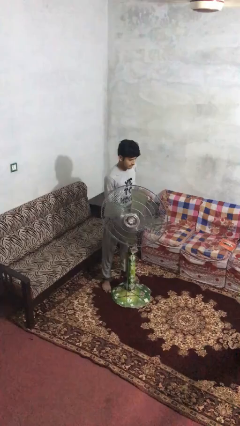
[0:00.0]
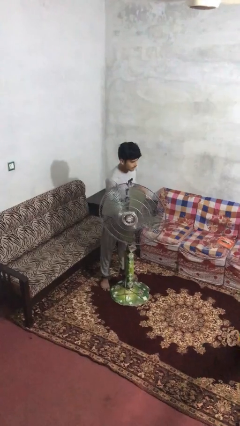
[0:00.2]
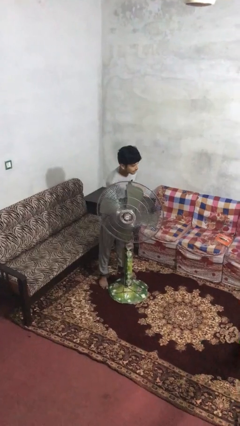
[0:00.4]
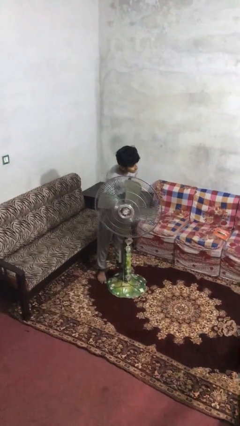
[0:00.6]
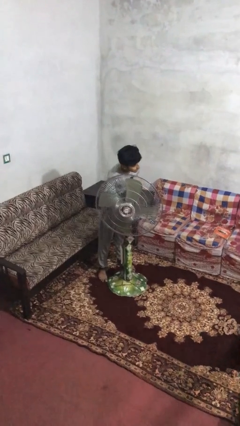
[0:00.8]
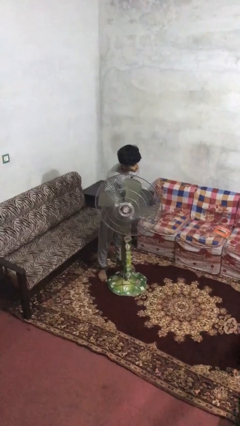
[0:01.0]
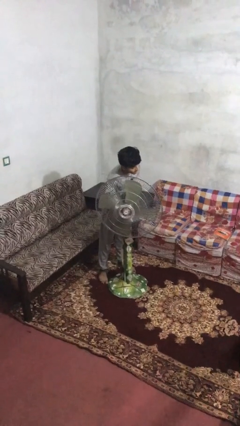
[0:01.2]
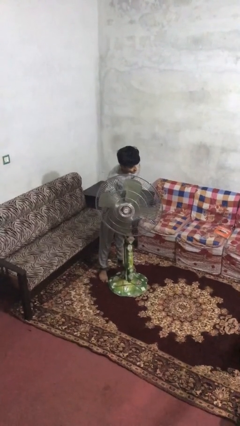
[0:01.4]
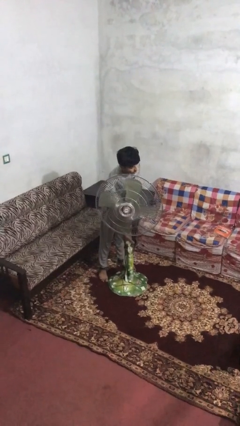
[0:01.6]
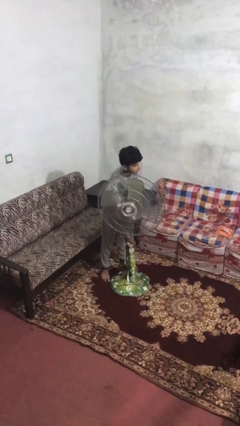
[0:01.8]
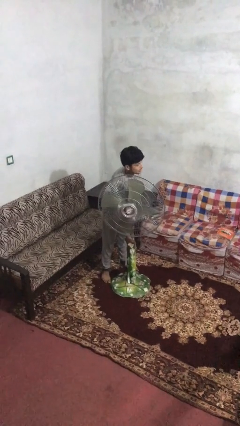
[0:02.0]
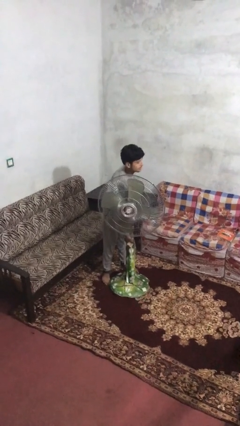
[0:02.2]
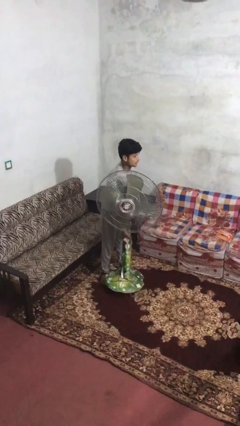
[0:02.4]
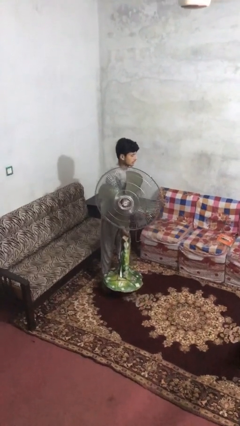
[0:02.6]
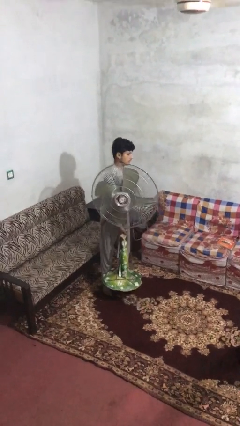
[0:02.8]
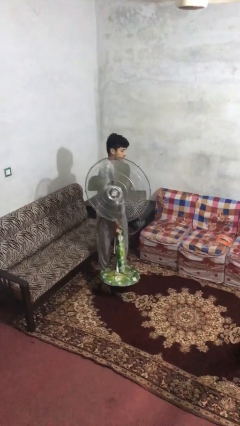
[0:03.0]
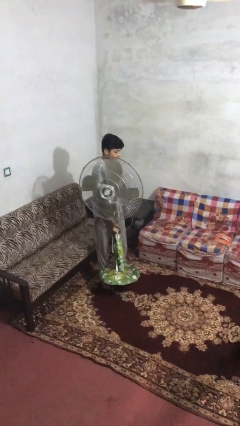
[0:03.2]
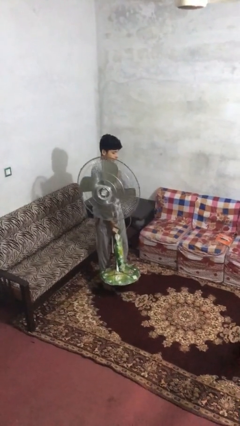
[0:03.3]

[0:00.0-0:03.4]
person picks up object from floor

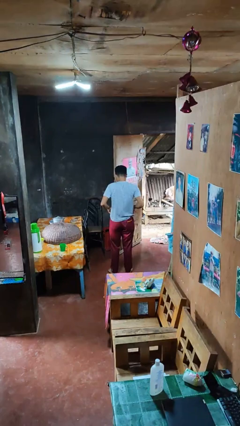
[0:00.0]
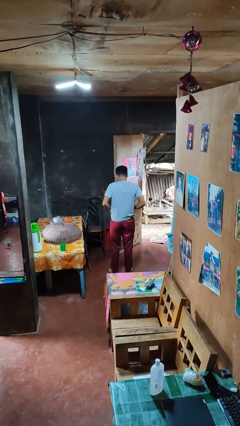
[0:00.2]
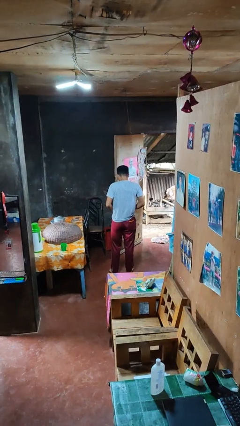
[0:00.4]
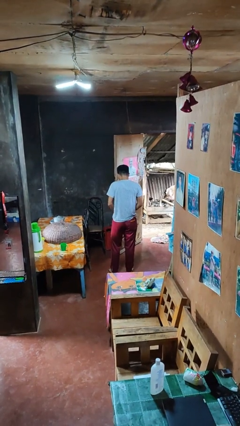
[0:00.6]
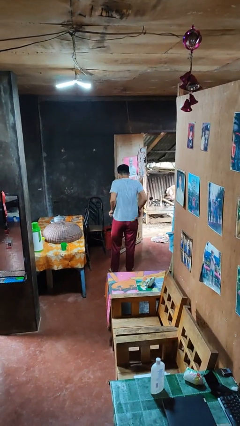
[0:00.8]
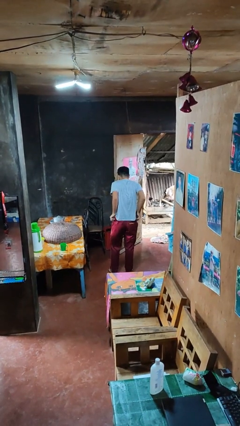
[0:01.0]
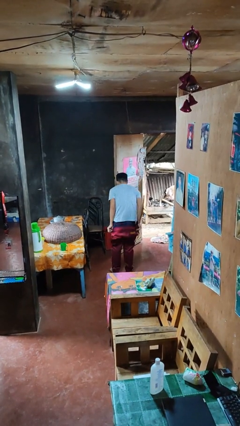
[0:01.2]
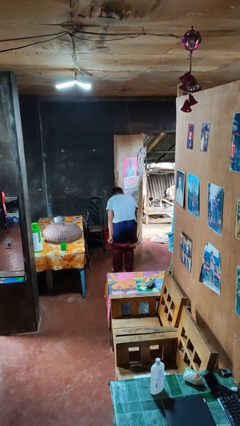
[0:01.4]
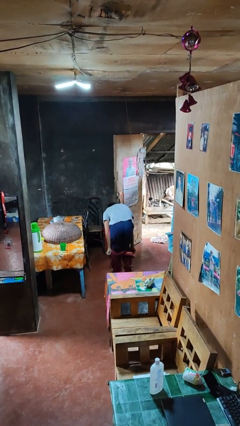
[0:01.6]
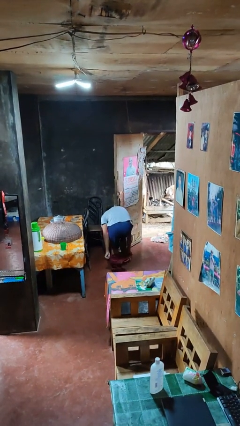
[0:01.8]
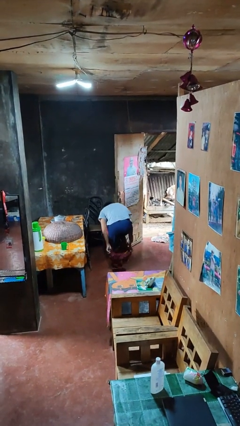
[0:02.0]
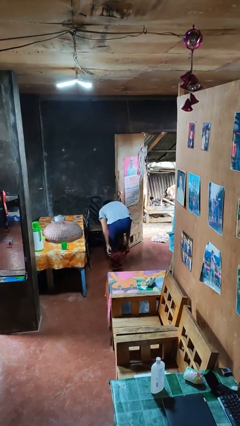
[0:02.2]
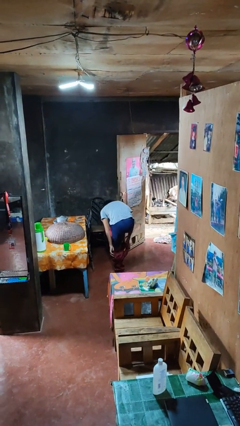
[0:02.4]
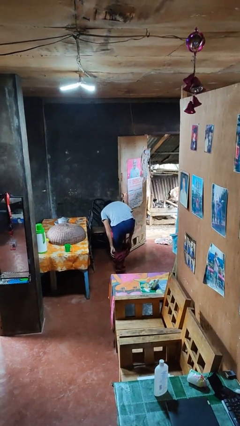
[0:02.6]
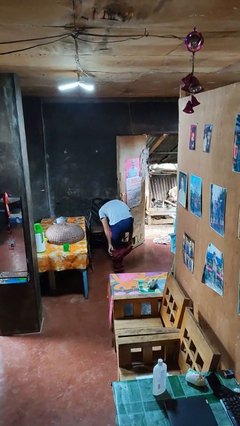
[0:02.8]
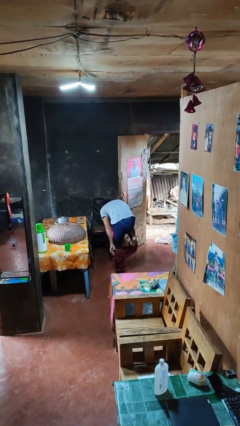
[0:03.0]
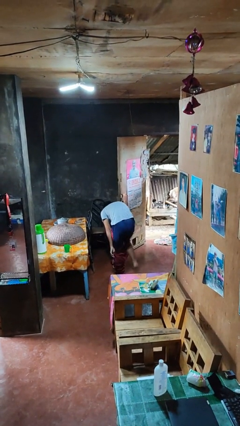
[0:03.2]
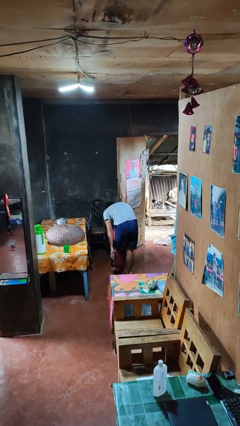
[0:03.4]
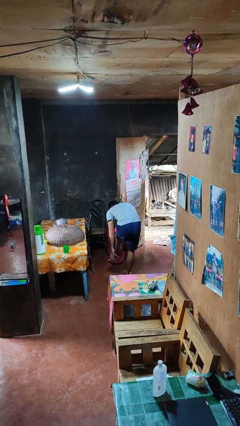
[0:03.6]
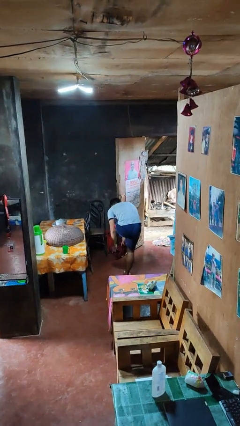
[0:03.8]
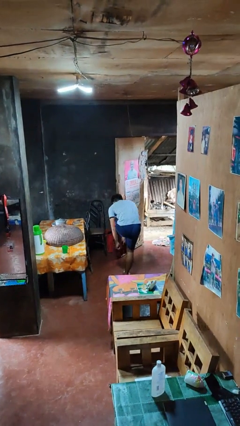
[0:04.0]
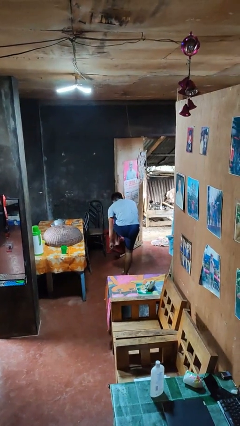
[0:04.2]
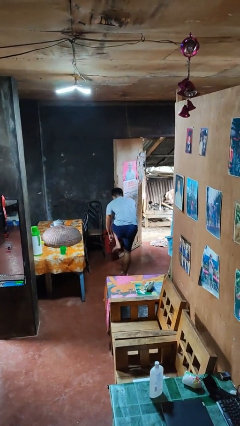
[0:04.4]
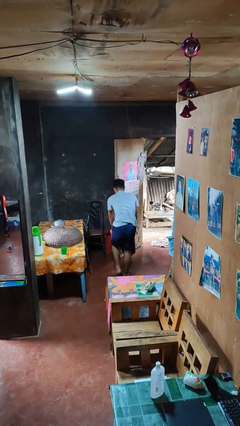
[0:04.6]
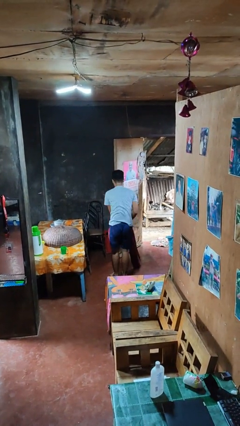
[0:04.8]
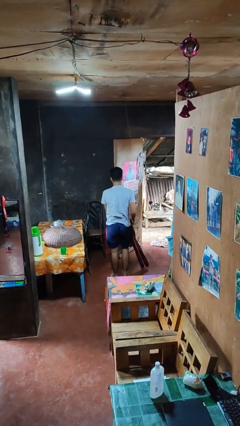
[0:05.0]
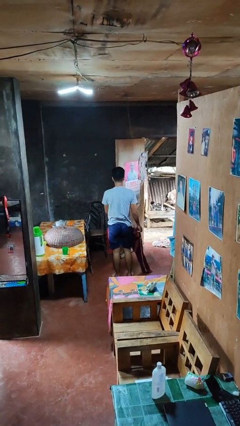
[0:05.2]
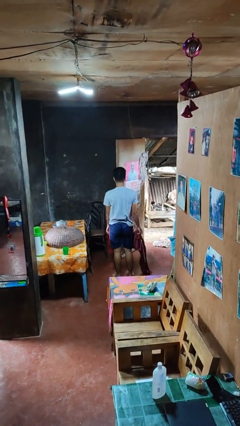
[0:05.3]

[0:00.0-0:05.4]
person takes off pants

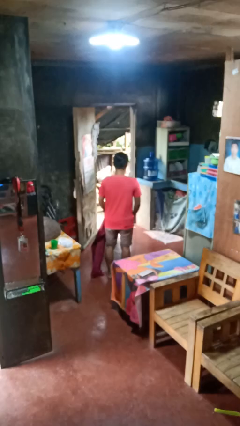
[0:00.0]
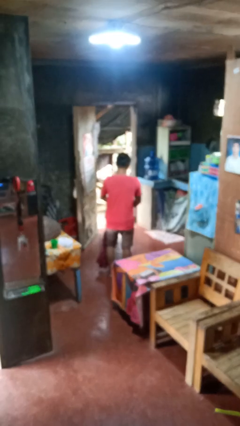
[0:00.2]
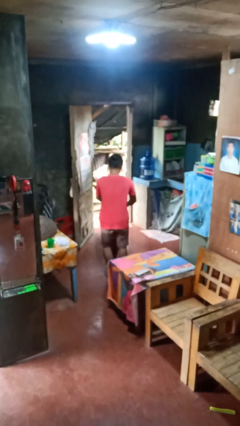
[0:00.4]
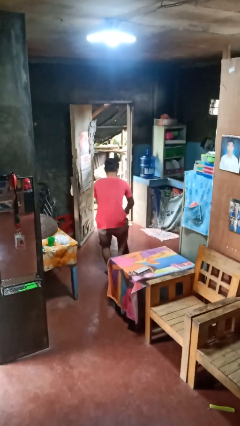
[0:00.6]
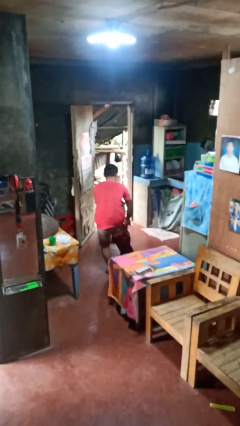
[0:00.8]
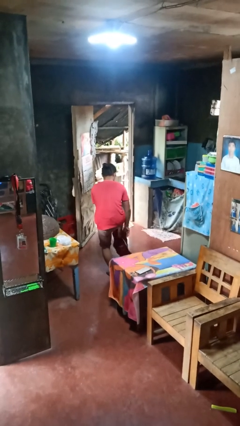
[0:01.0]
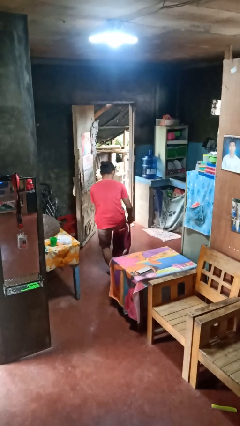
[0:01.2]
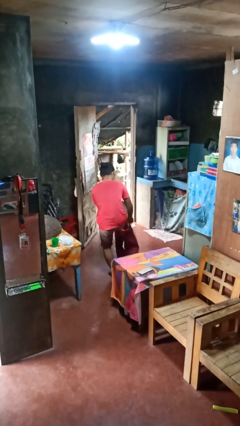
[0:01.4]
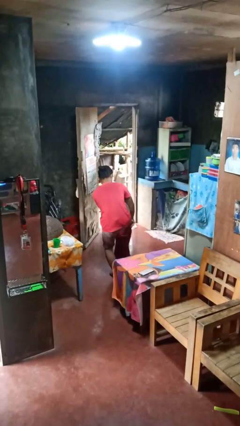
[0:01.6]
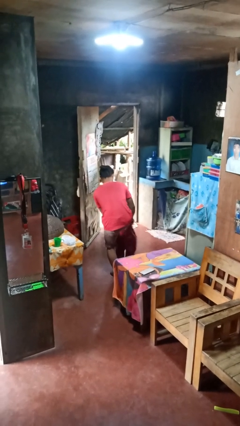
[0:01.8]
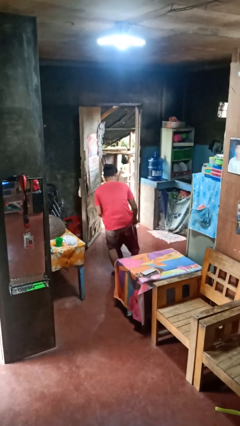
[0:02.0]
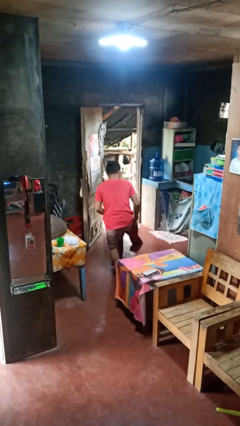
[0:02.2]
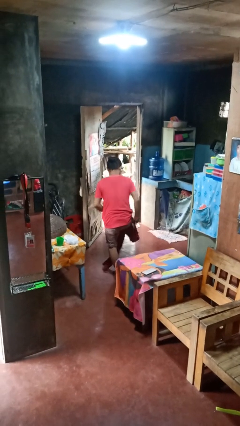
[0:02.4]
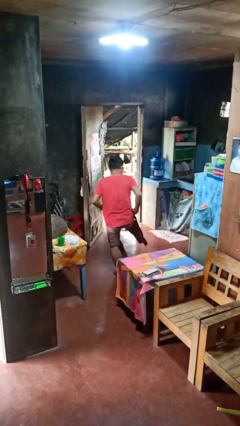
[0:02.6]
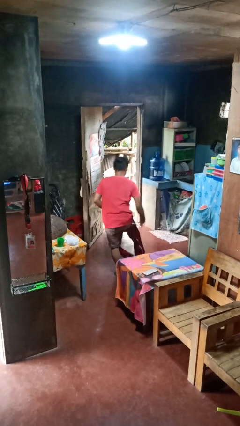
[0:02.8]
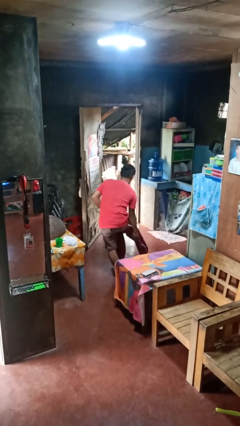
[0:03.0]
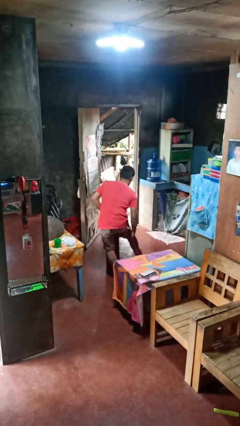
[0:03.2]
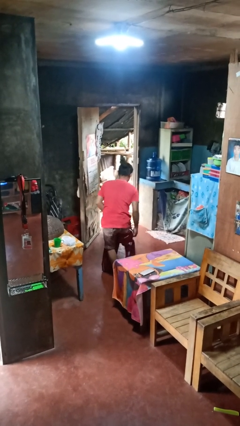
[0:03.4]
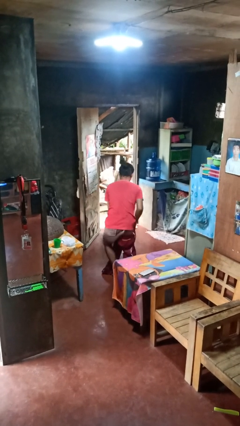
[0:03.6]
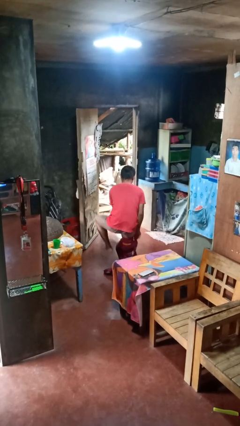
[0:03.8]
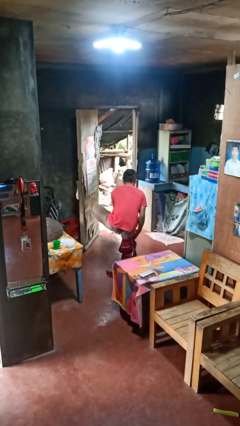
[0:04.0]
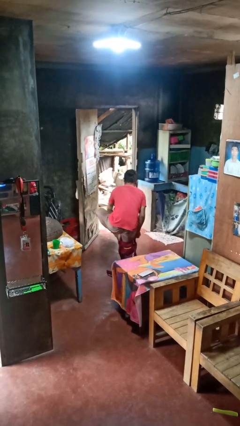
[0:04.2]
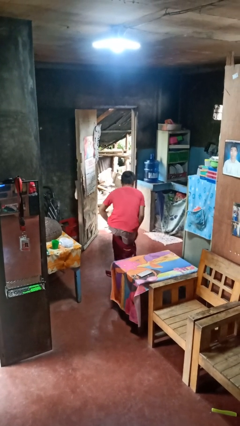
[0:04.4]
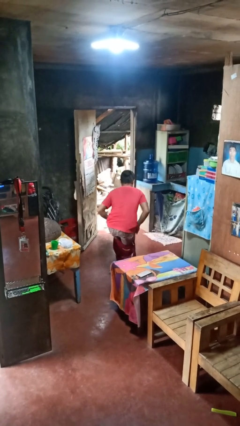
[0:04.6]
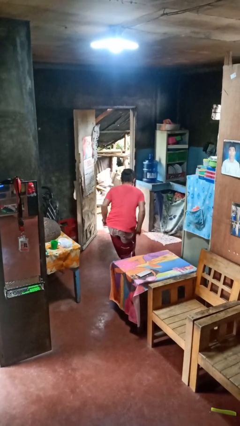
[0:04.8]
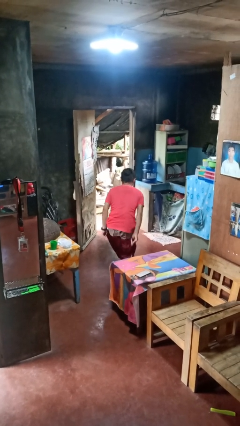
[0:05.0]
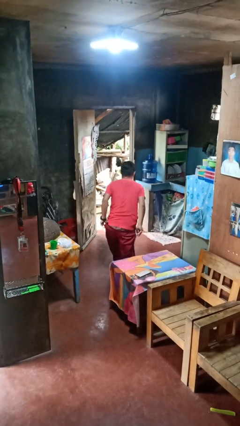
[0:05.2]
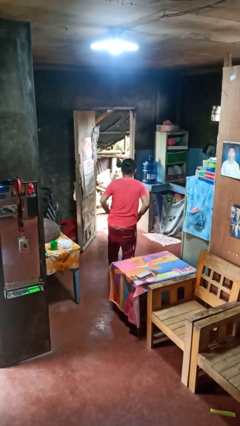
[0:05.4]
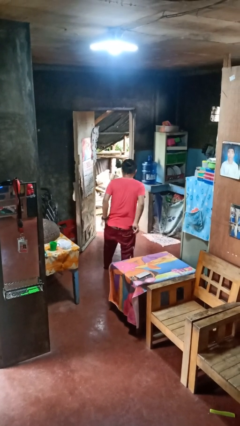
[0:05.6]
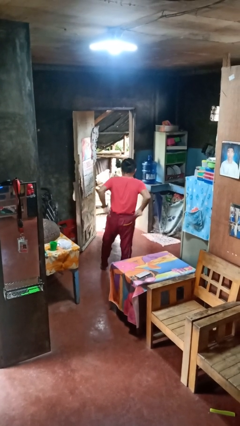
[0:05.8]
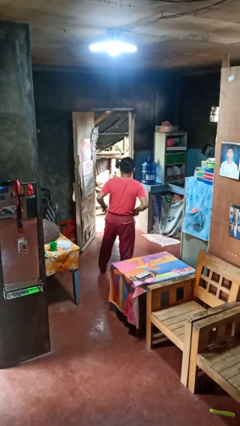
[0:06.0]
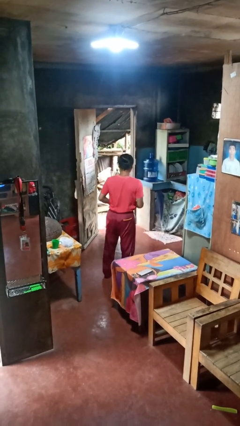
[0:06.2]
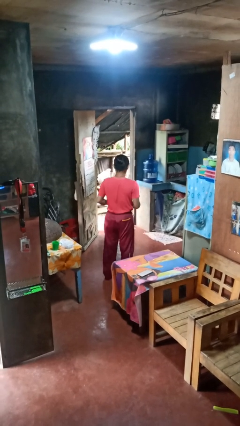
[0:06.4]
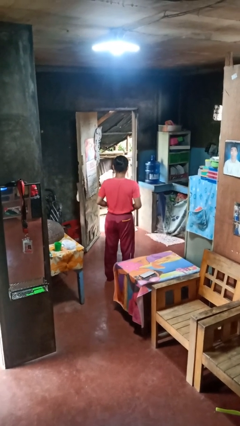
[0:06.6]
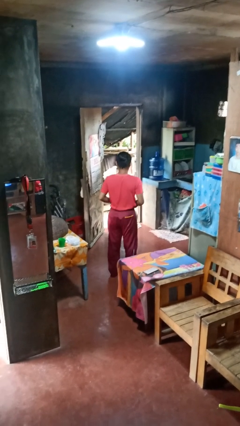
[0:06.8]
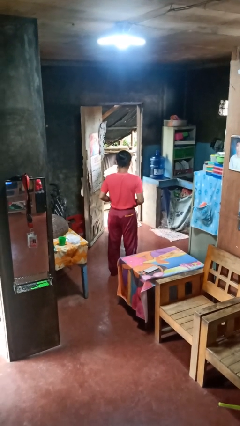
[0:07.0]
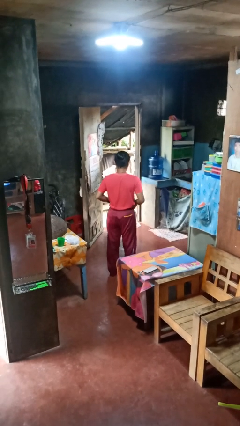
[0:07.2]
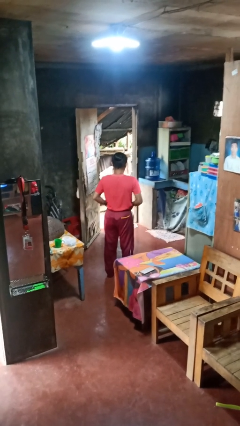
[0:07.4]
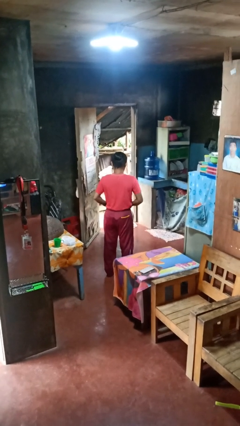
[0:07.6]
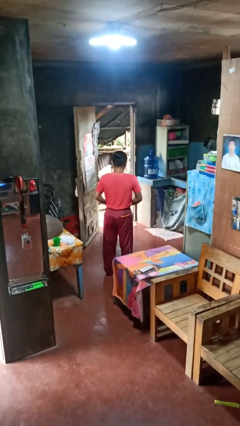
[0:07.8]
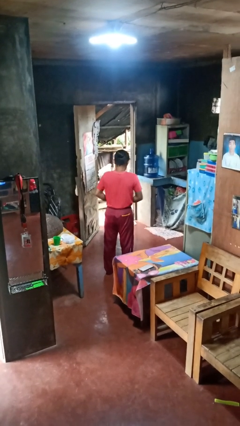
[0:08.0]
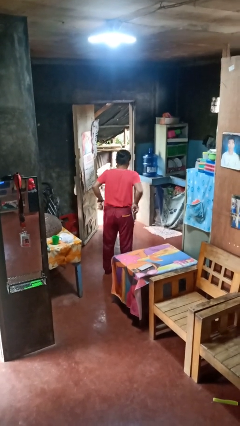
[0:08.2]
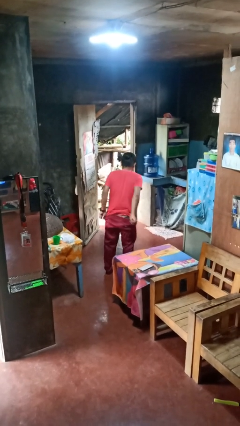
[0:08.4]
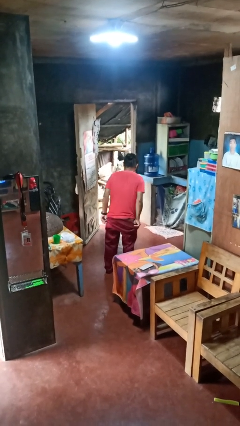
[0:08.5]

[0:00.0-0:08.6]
person puts on pants

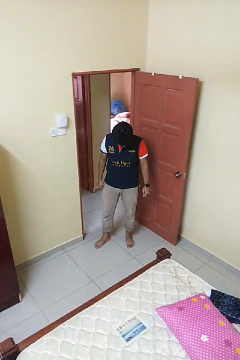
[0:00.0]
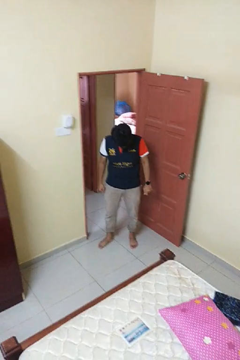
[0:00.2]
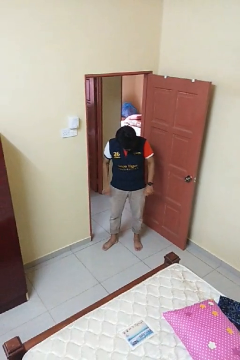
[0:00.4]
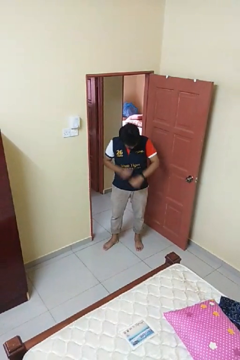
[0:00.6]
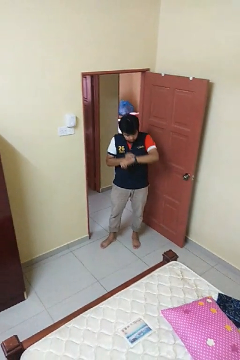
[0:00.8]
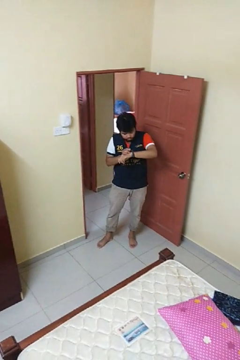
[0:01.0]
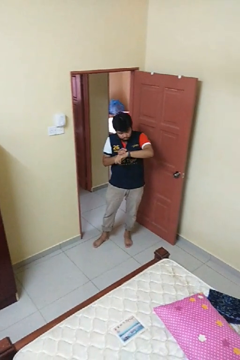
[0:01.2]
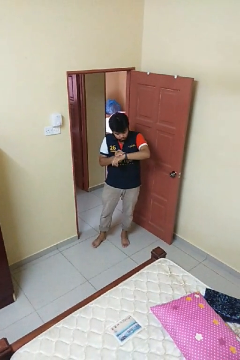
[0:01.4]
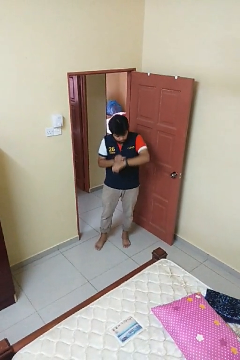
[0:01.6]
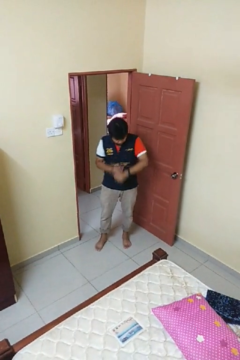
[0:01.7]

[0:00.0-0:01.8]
person looks at wristwatch
